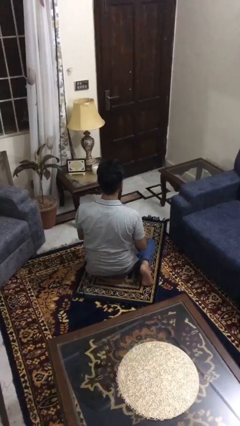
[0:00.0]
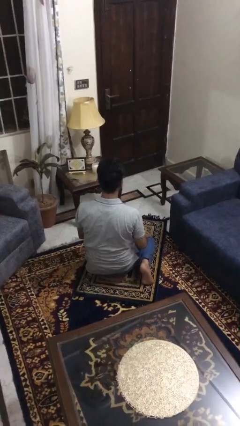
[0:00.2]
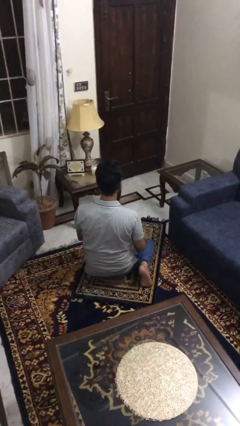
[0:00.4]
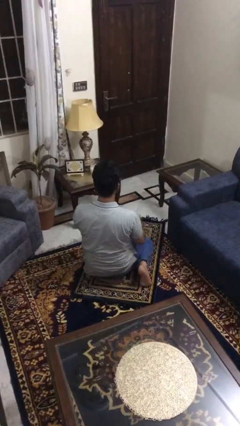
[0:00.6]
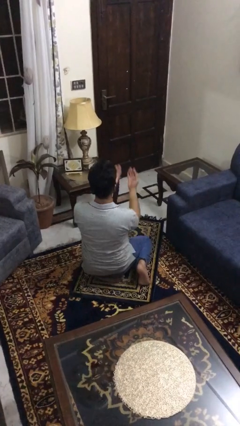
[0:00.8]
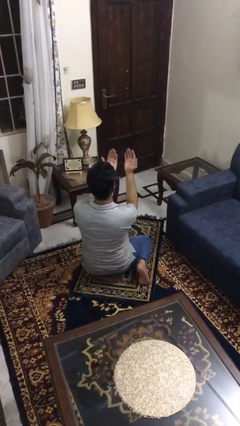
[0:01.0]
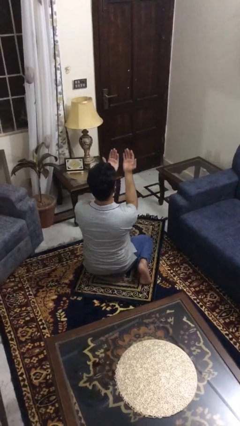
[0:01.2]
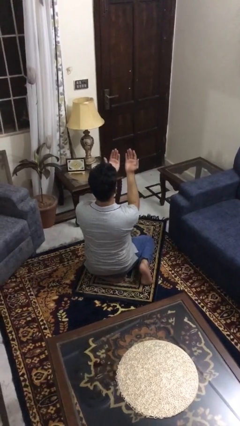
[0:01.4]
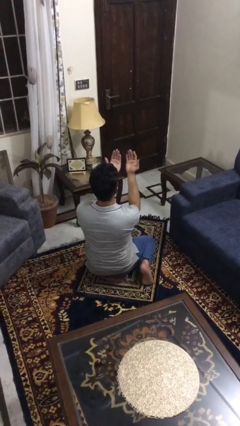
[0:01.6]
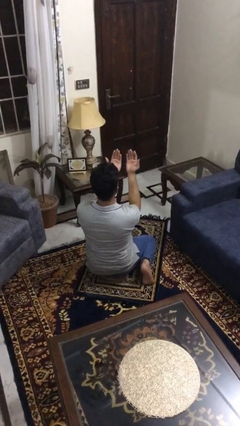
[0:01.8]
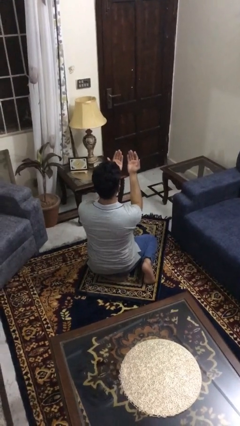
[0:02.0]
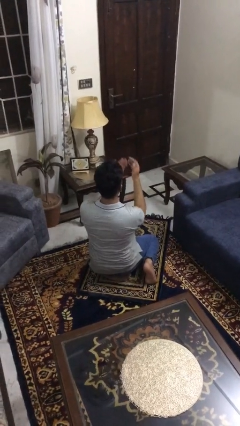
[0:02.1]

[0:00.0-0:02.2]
person prays

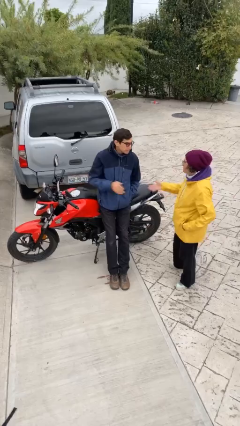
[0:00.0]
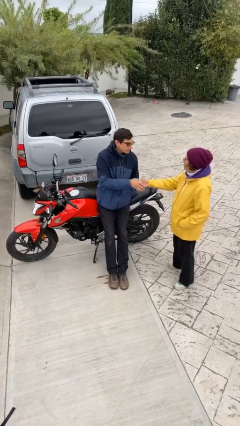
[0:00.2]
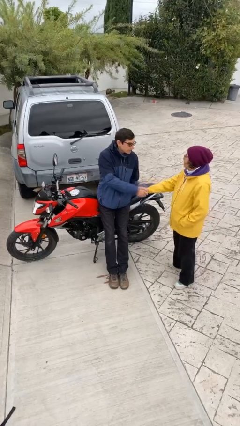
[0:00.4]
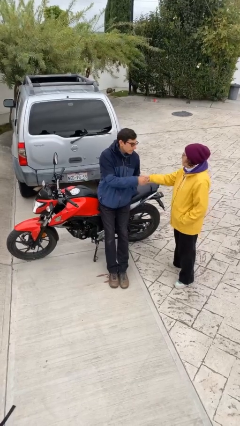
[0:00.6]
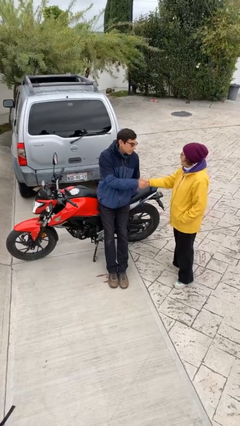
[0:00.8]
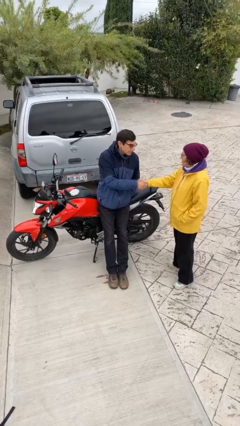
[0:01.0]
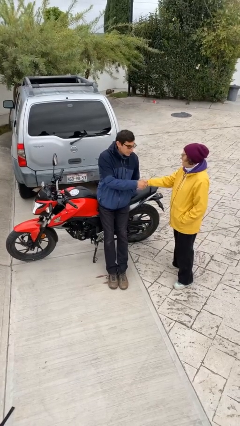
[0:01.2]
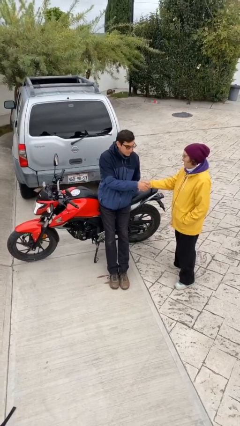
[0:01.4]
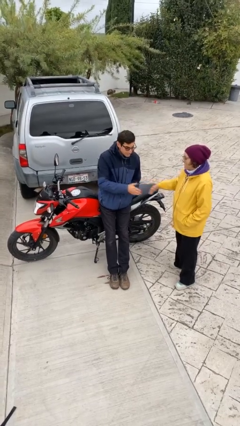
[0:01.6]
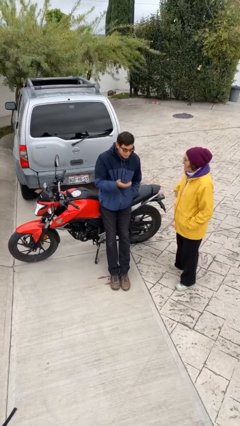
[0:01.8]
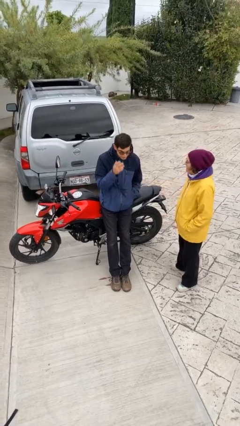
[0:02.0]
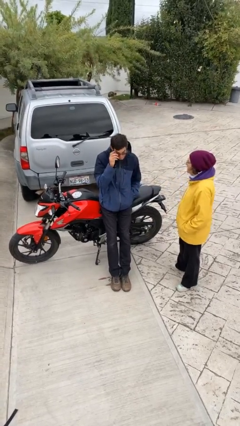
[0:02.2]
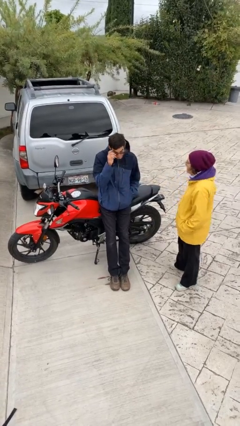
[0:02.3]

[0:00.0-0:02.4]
person shakes hand

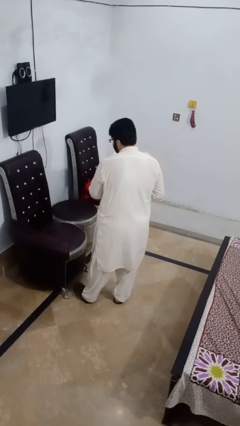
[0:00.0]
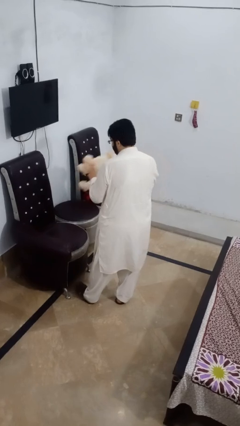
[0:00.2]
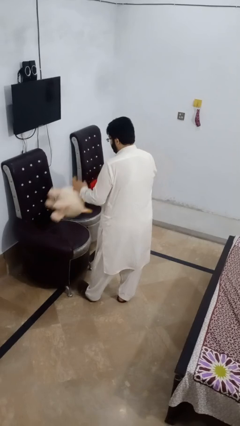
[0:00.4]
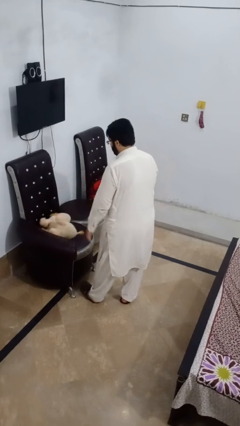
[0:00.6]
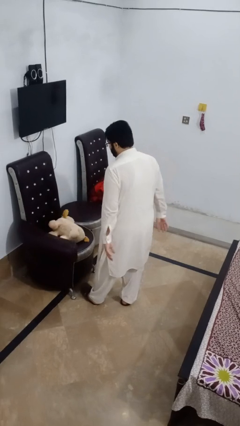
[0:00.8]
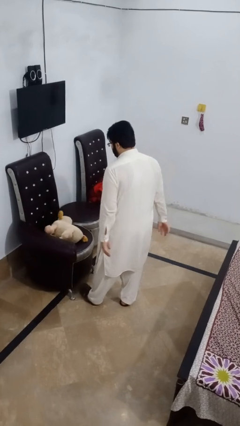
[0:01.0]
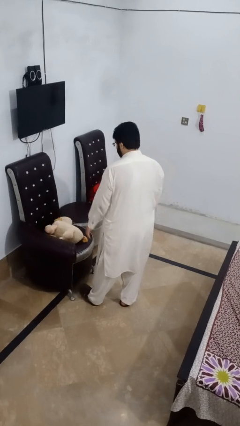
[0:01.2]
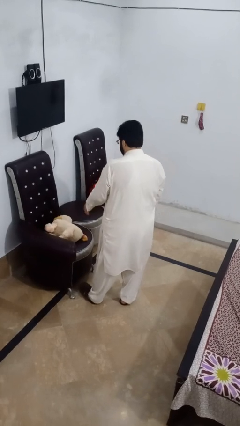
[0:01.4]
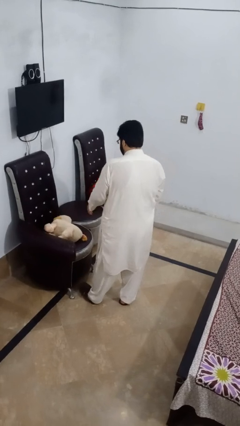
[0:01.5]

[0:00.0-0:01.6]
person puts down object on couch

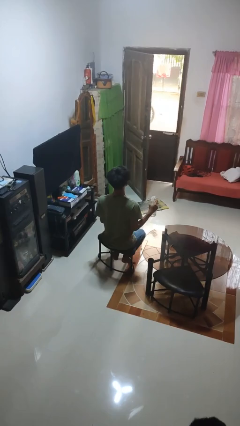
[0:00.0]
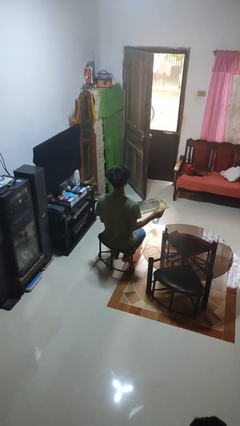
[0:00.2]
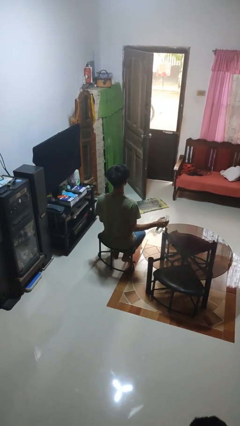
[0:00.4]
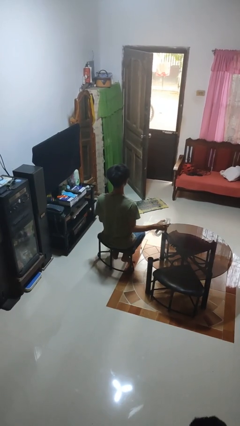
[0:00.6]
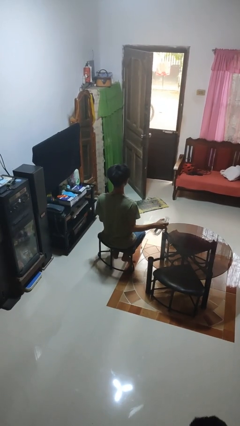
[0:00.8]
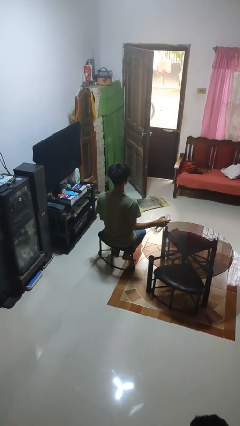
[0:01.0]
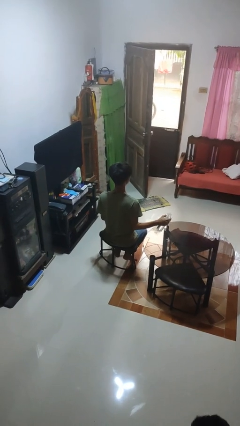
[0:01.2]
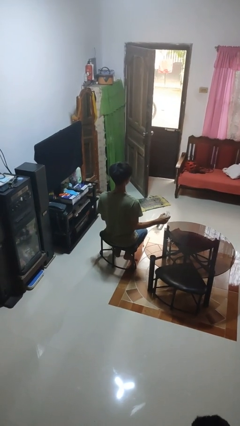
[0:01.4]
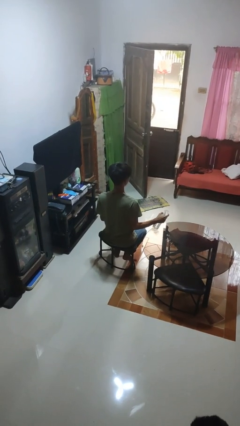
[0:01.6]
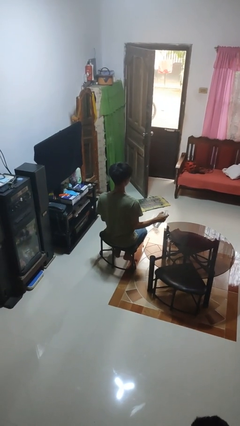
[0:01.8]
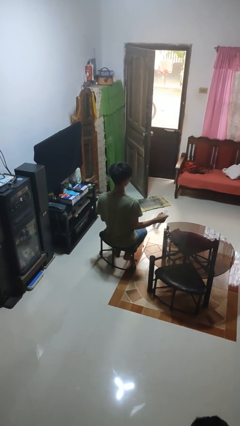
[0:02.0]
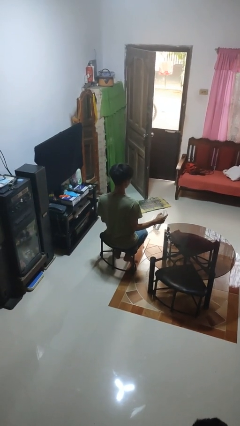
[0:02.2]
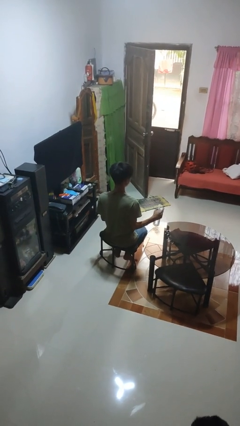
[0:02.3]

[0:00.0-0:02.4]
person sprays from bottle

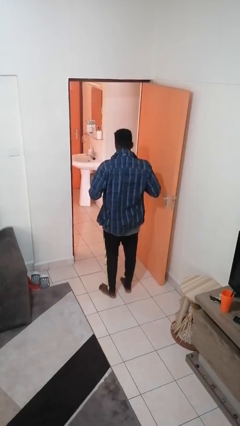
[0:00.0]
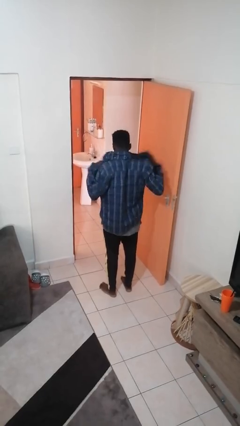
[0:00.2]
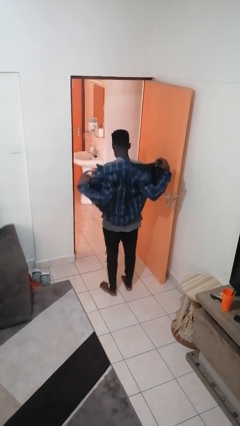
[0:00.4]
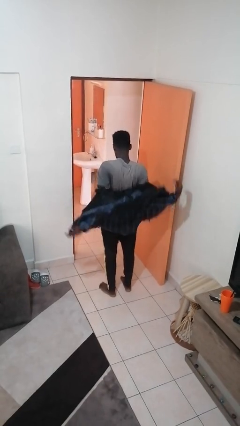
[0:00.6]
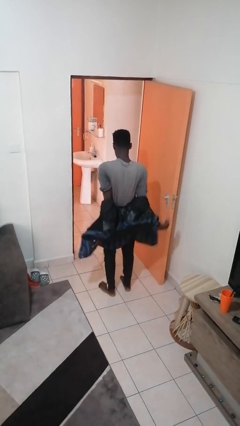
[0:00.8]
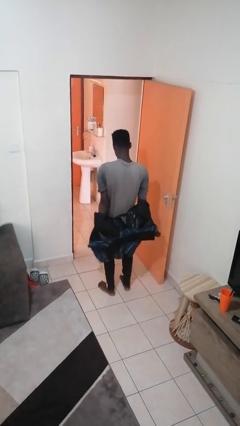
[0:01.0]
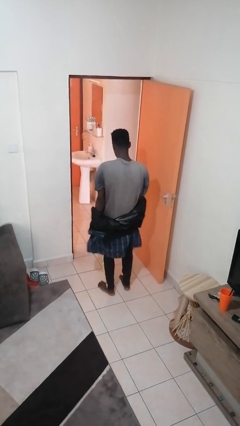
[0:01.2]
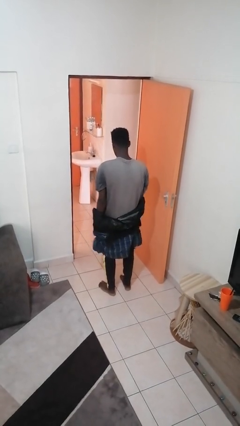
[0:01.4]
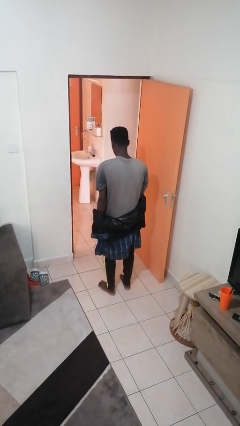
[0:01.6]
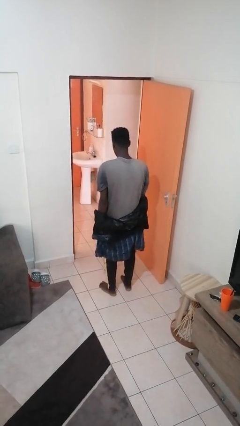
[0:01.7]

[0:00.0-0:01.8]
person takes off jacket

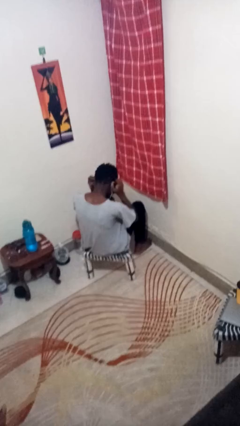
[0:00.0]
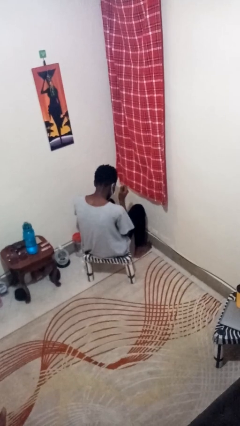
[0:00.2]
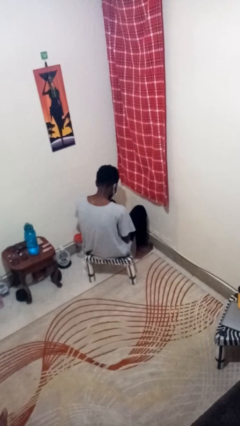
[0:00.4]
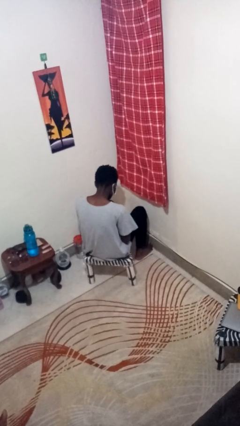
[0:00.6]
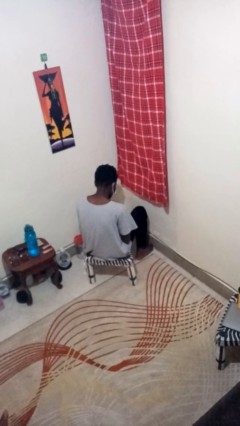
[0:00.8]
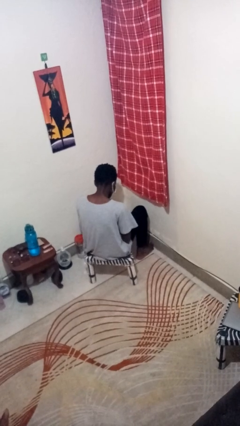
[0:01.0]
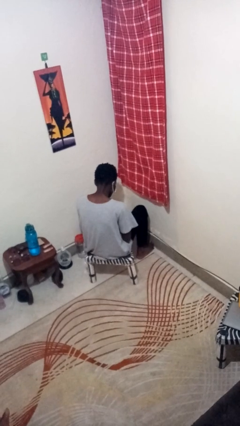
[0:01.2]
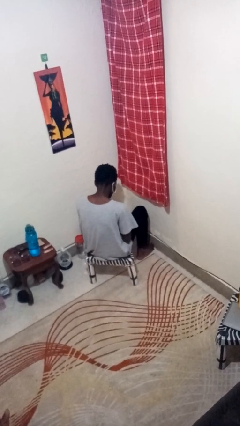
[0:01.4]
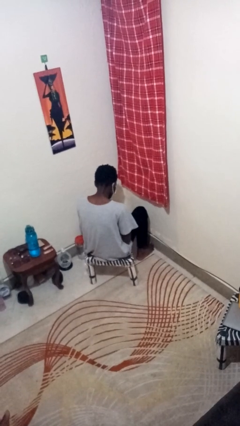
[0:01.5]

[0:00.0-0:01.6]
person puts on facemask

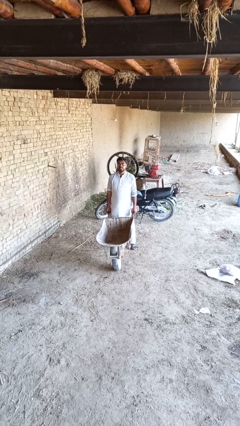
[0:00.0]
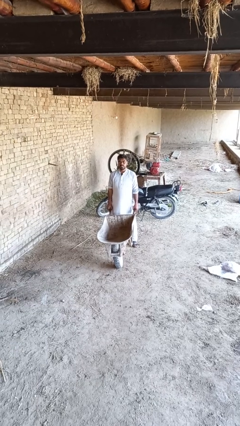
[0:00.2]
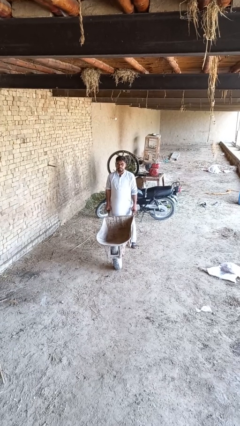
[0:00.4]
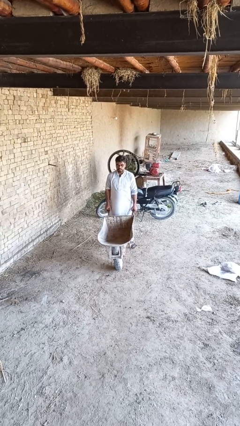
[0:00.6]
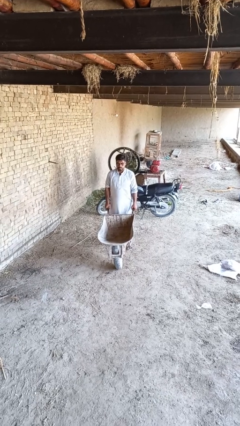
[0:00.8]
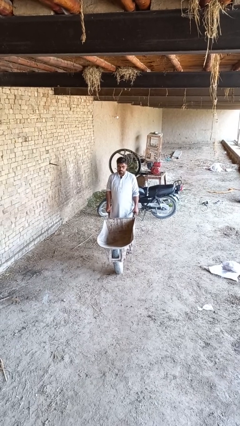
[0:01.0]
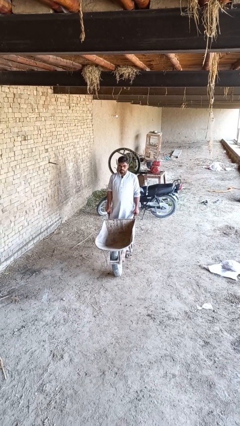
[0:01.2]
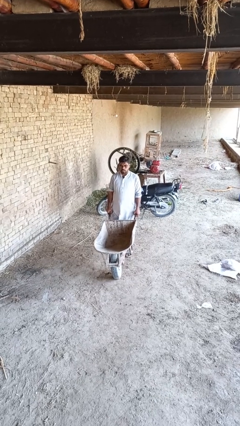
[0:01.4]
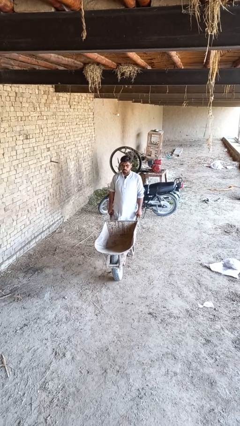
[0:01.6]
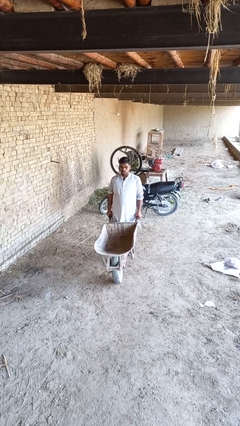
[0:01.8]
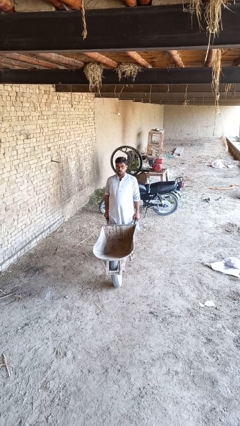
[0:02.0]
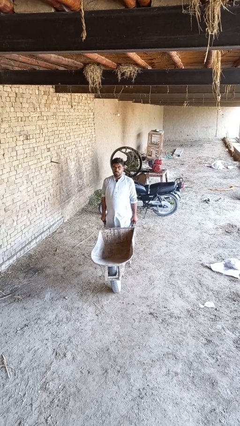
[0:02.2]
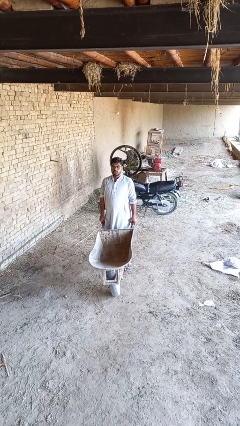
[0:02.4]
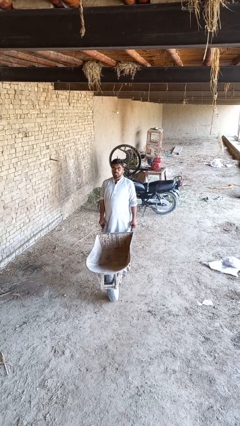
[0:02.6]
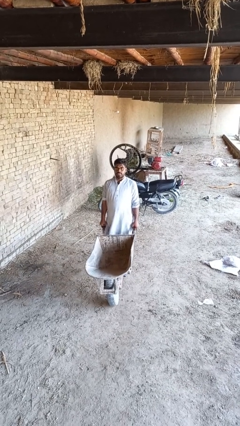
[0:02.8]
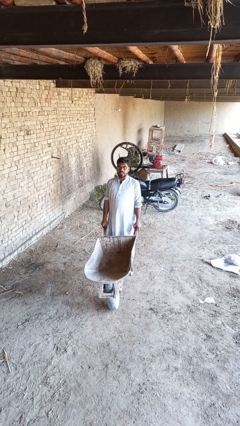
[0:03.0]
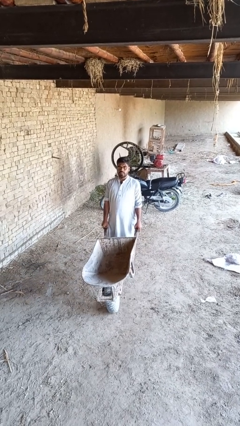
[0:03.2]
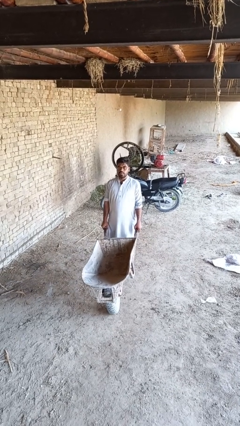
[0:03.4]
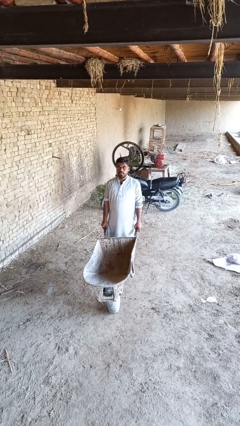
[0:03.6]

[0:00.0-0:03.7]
person pushes wheeled cart

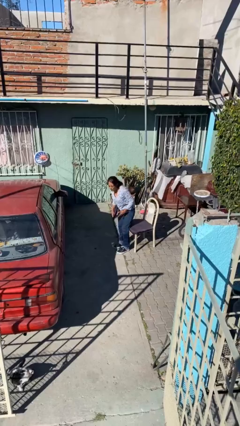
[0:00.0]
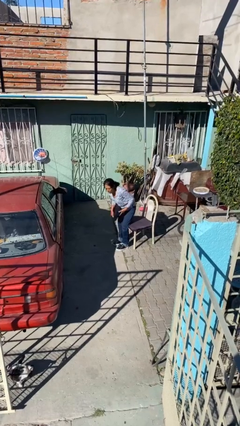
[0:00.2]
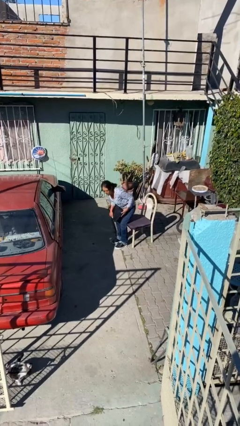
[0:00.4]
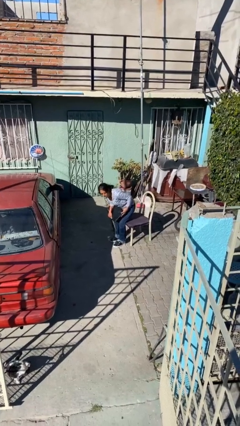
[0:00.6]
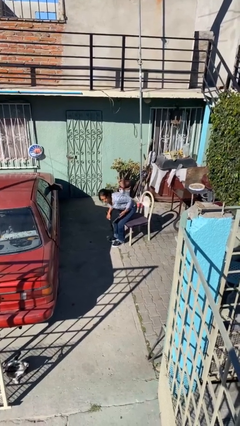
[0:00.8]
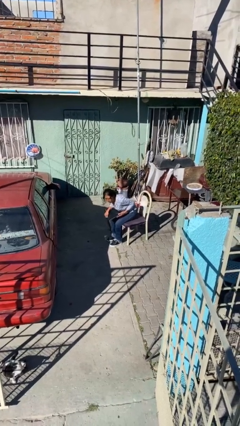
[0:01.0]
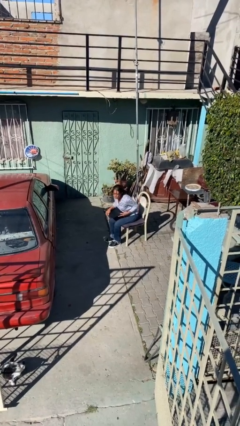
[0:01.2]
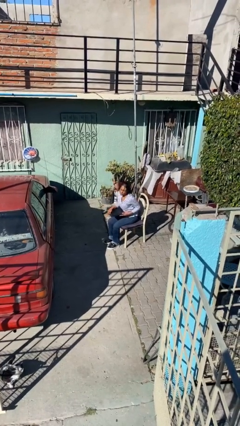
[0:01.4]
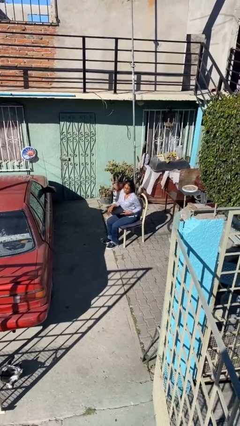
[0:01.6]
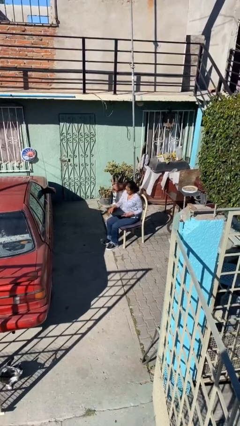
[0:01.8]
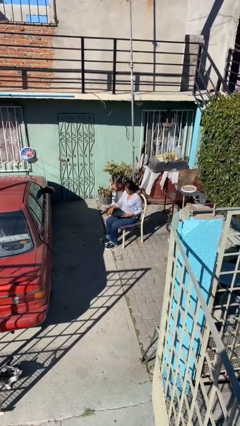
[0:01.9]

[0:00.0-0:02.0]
person sits down
